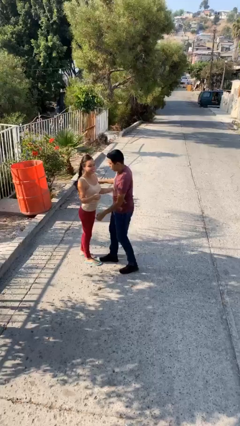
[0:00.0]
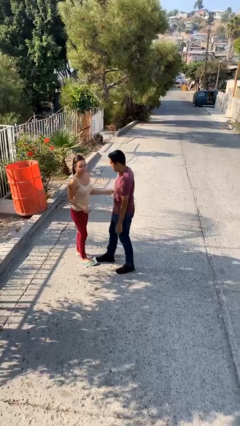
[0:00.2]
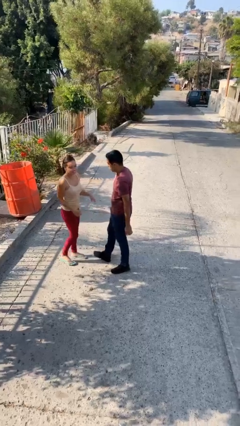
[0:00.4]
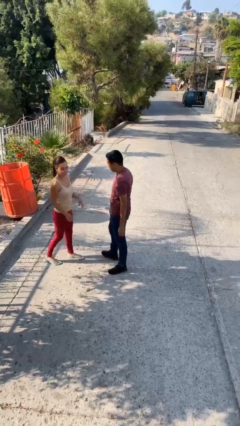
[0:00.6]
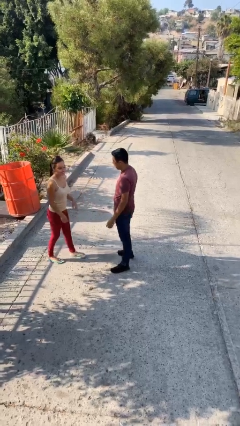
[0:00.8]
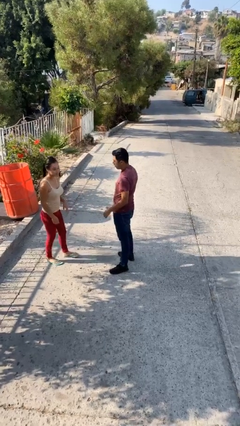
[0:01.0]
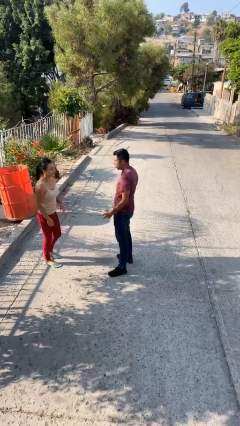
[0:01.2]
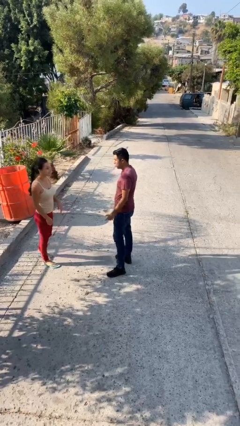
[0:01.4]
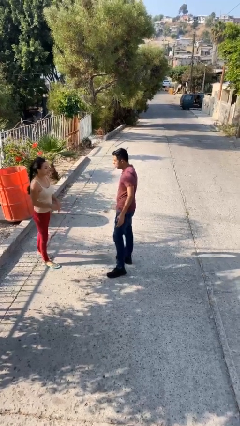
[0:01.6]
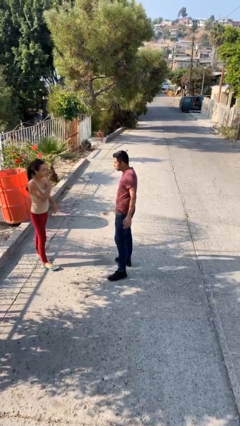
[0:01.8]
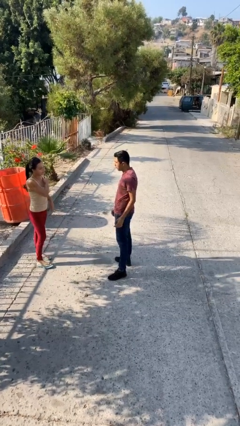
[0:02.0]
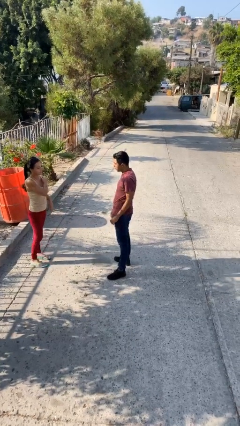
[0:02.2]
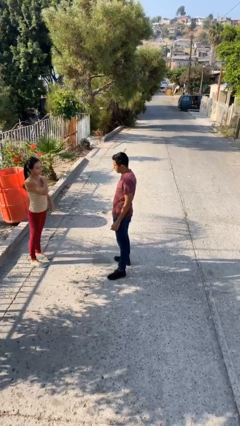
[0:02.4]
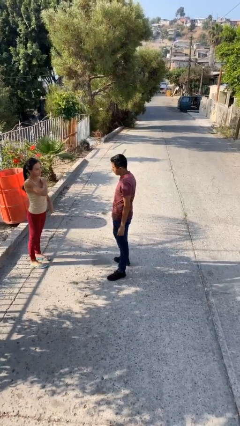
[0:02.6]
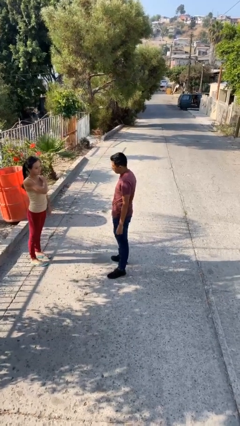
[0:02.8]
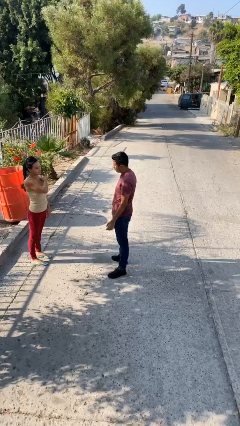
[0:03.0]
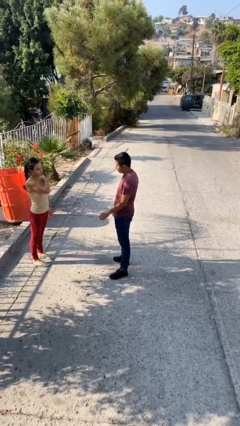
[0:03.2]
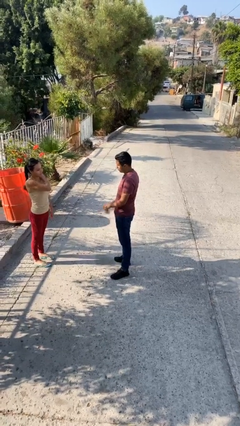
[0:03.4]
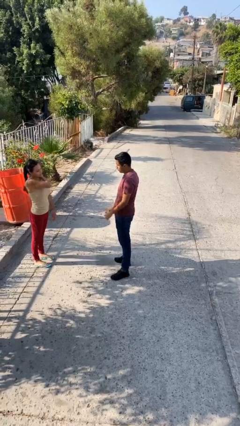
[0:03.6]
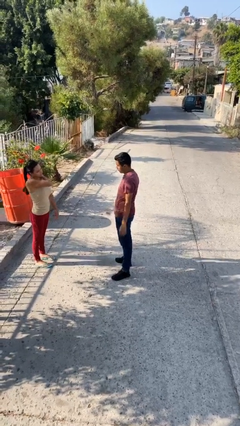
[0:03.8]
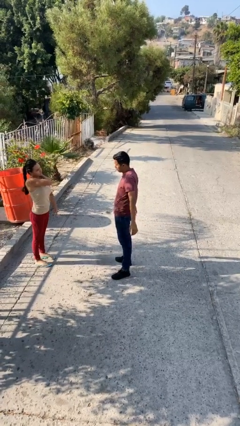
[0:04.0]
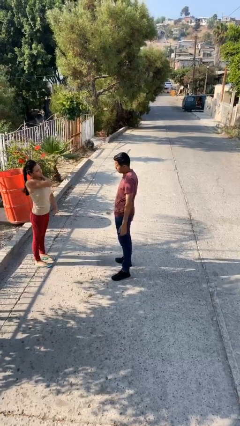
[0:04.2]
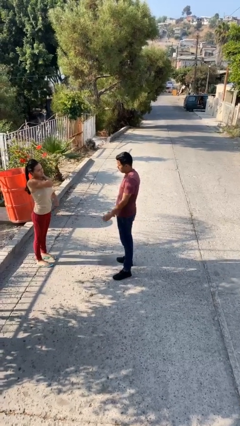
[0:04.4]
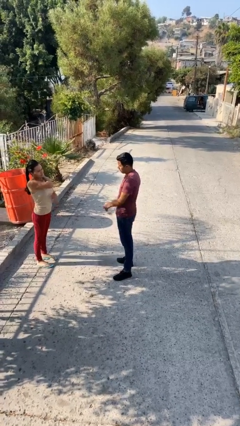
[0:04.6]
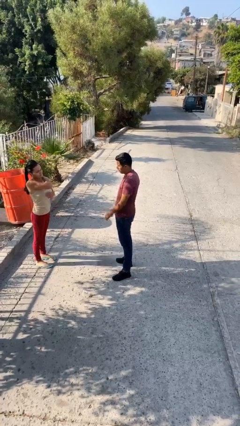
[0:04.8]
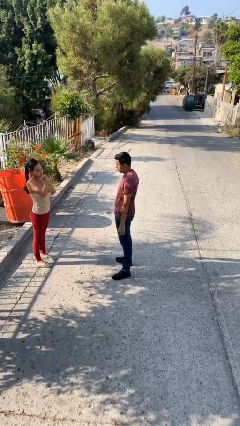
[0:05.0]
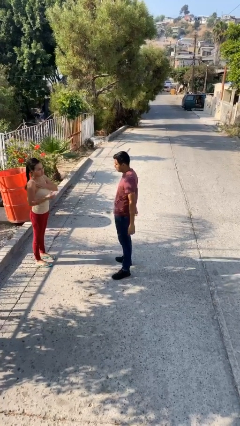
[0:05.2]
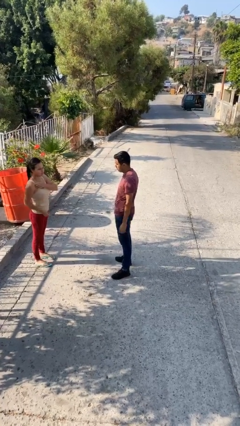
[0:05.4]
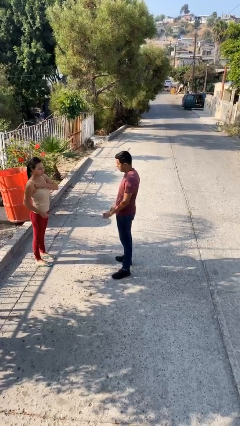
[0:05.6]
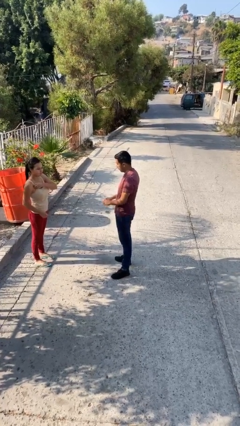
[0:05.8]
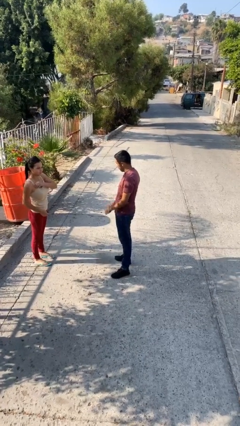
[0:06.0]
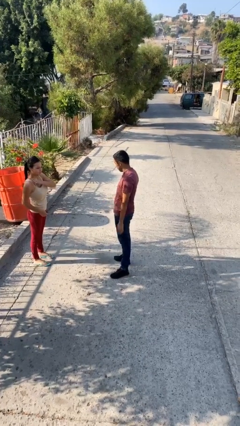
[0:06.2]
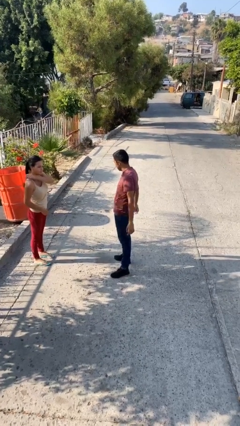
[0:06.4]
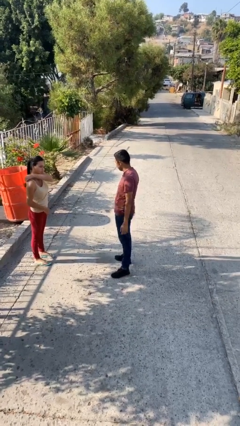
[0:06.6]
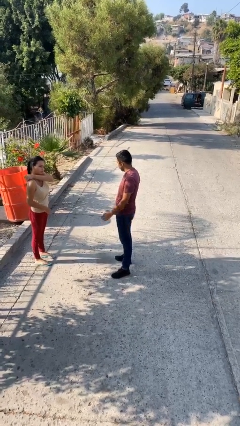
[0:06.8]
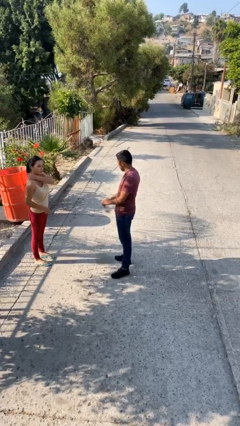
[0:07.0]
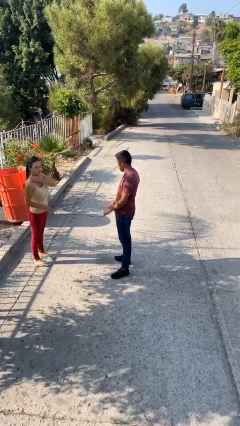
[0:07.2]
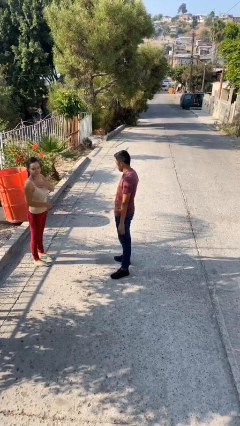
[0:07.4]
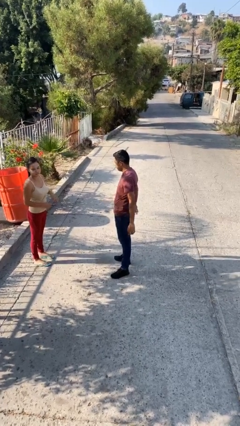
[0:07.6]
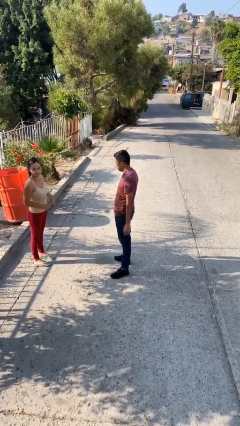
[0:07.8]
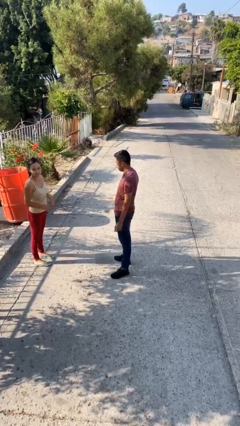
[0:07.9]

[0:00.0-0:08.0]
person talks to person

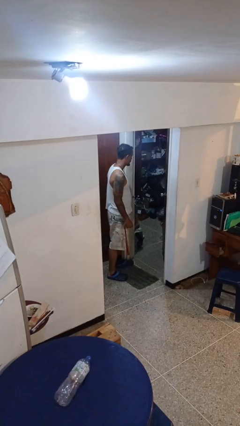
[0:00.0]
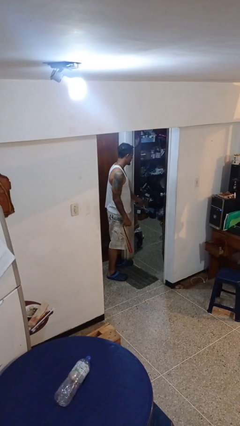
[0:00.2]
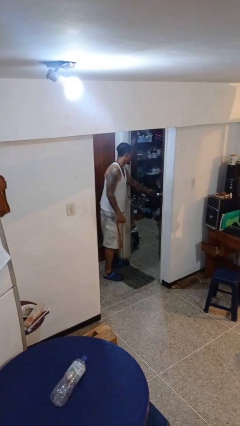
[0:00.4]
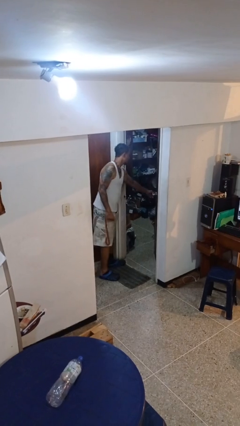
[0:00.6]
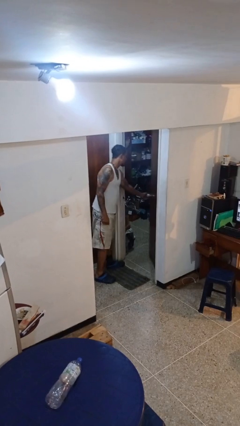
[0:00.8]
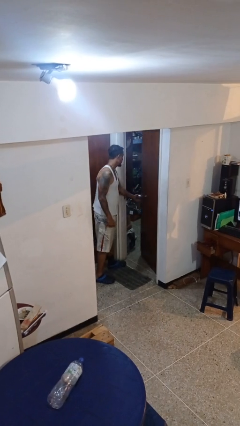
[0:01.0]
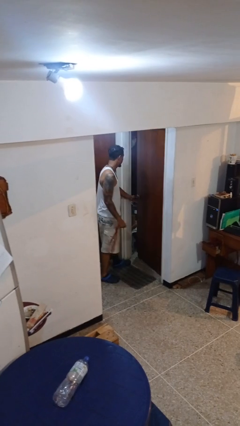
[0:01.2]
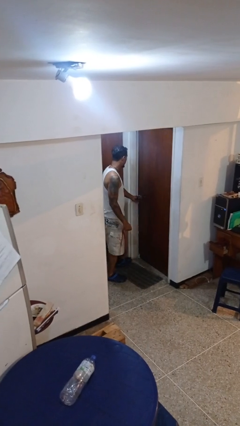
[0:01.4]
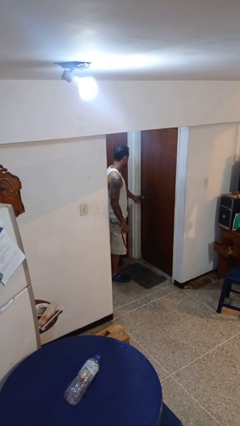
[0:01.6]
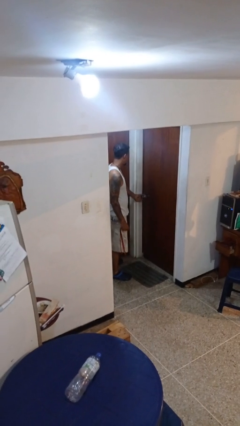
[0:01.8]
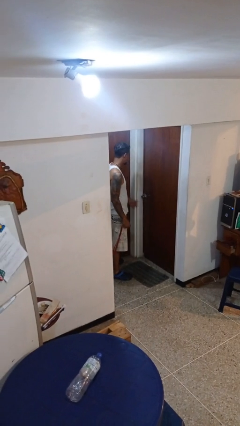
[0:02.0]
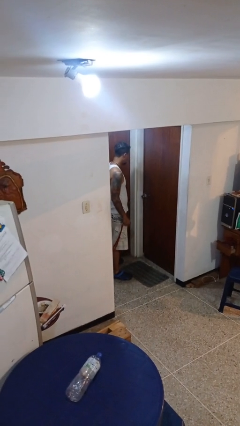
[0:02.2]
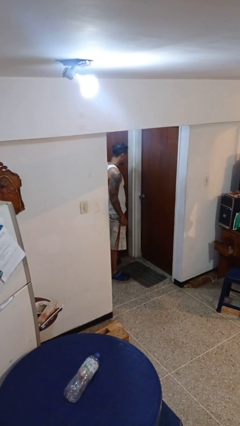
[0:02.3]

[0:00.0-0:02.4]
person closes facility door

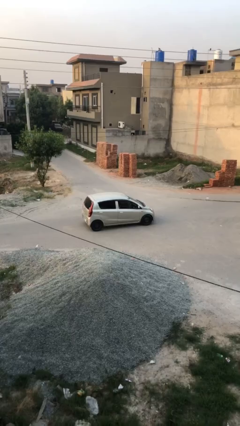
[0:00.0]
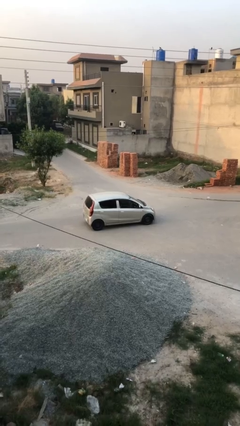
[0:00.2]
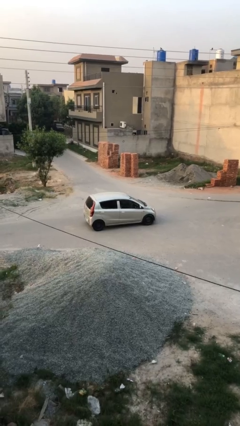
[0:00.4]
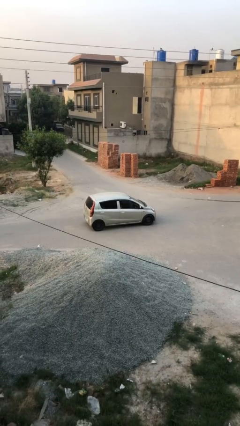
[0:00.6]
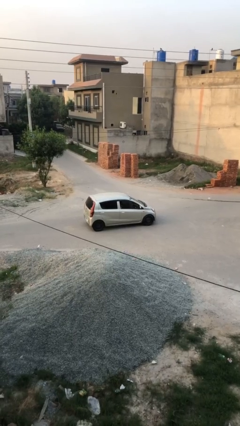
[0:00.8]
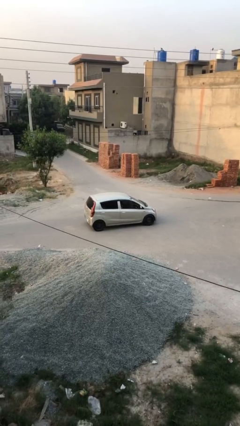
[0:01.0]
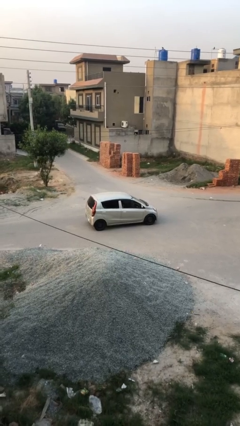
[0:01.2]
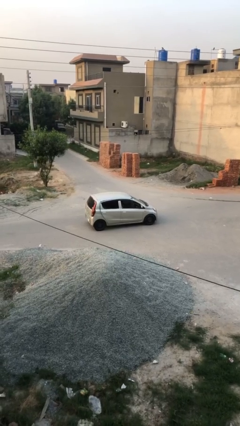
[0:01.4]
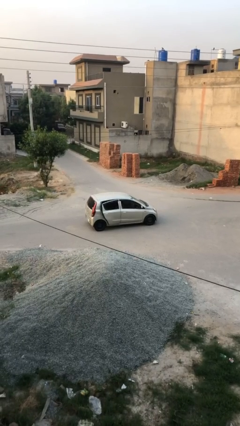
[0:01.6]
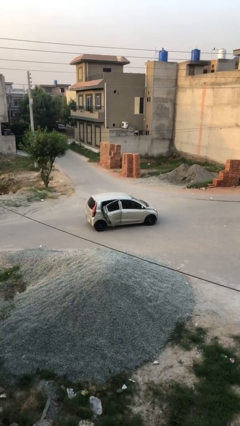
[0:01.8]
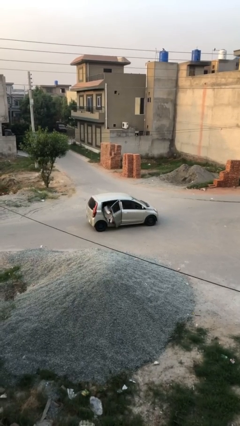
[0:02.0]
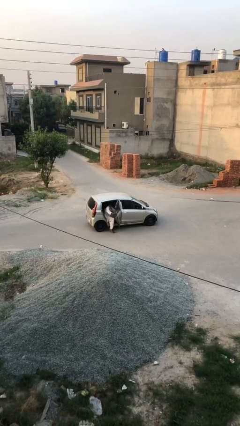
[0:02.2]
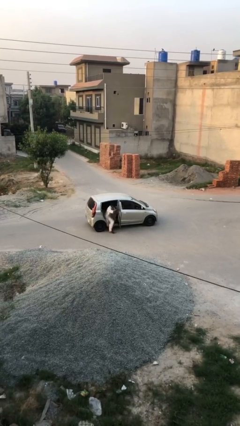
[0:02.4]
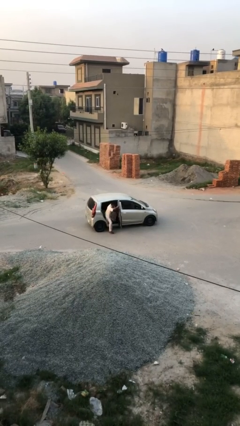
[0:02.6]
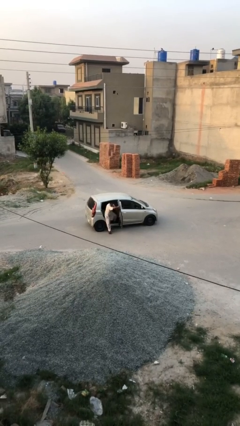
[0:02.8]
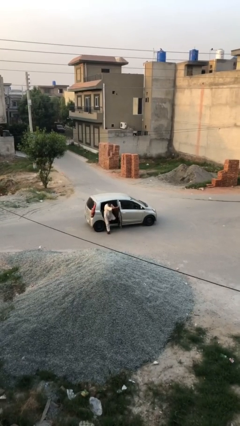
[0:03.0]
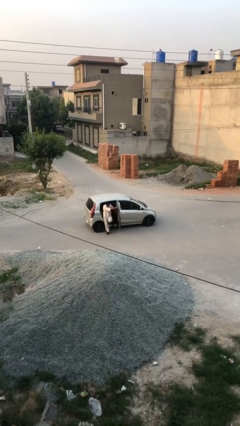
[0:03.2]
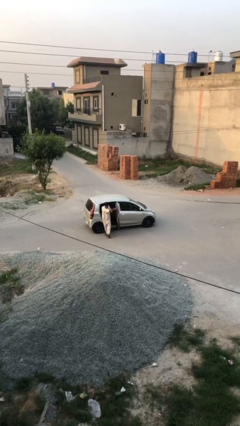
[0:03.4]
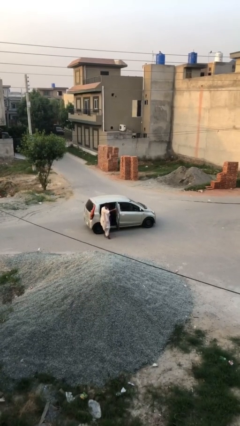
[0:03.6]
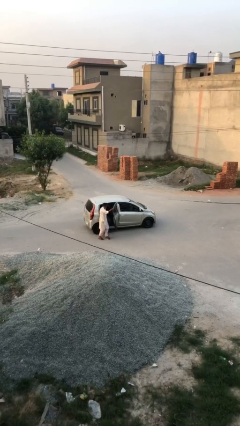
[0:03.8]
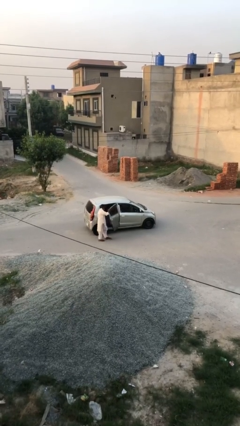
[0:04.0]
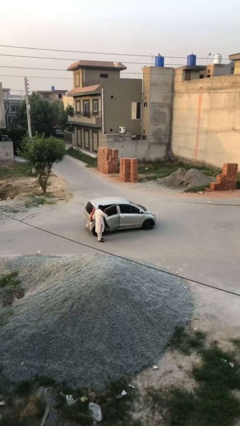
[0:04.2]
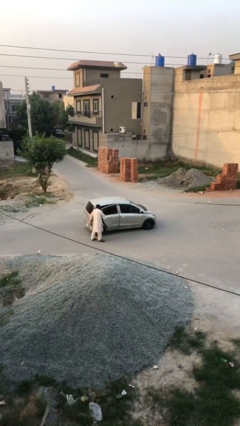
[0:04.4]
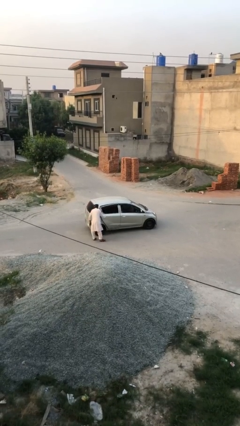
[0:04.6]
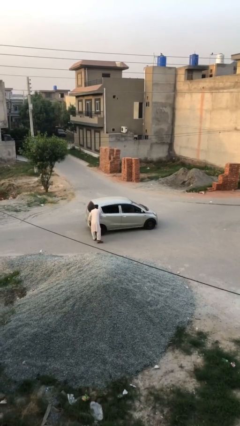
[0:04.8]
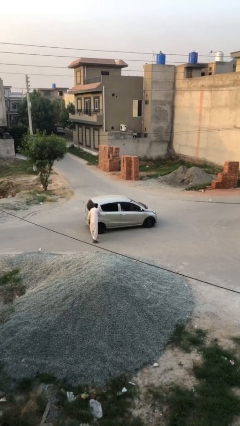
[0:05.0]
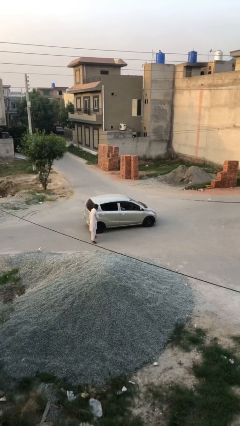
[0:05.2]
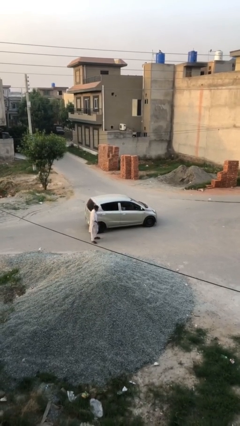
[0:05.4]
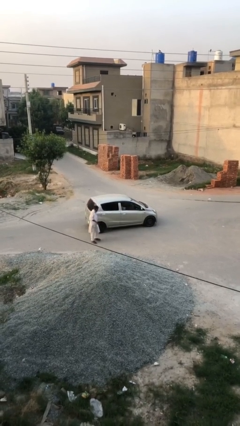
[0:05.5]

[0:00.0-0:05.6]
car drops off person

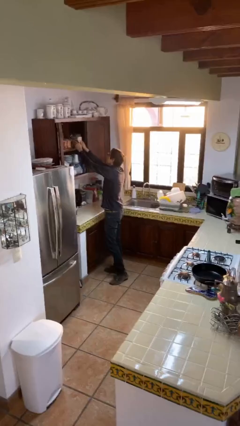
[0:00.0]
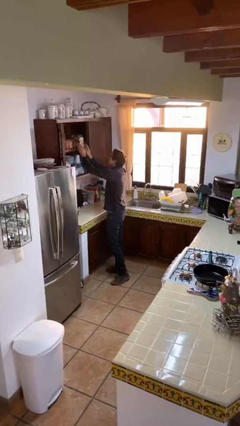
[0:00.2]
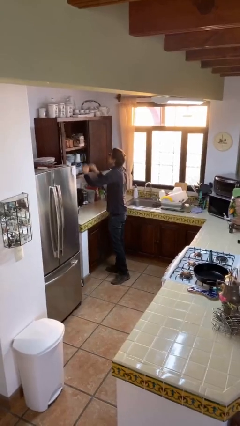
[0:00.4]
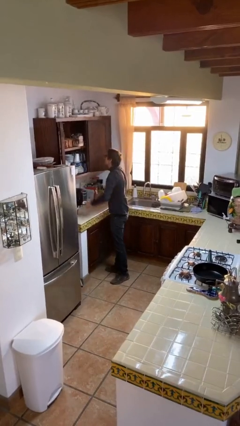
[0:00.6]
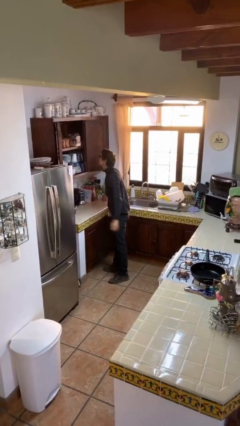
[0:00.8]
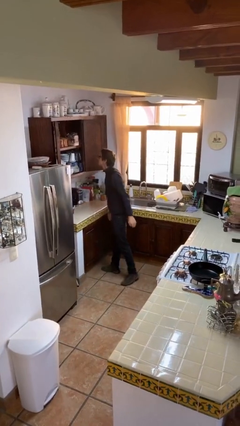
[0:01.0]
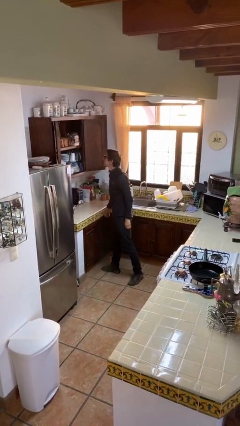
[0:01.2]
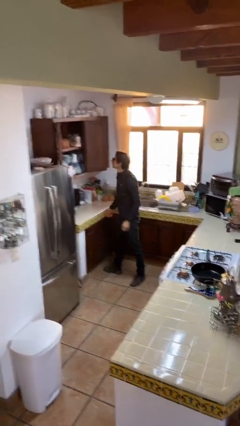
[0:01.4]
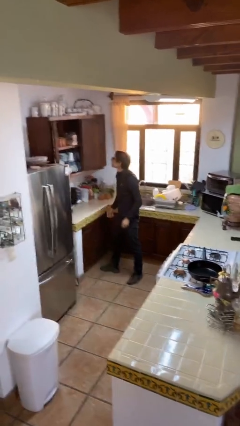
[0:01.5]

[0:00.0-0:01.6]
person puts down object on shelf
